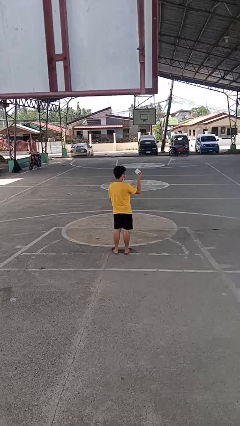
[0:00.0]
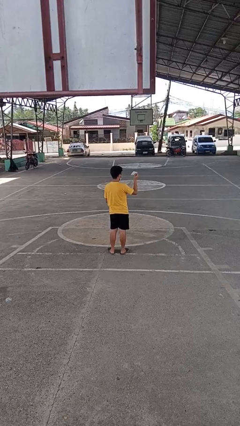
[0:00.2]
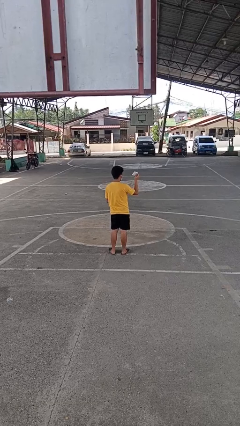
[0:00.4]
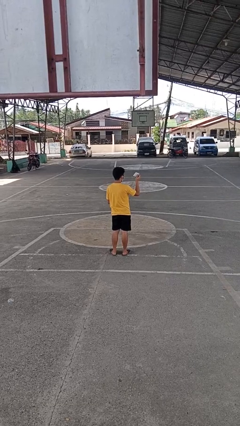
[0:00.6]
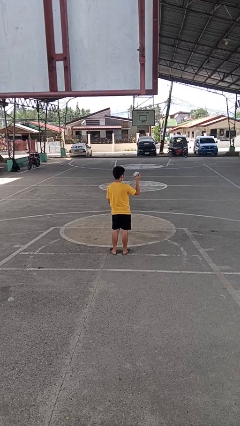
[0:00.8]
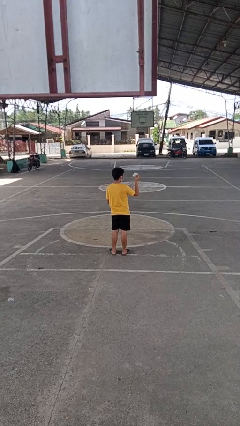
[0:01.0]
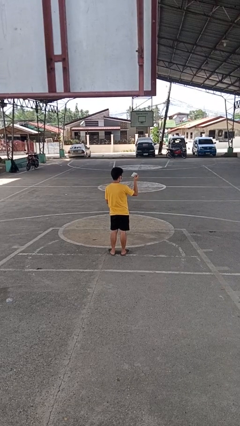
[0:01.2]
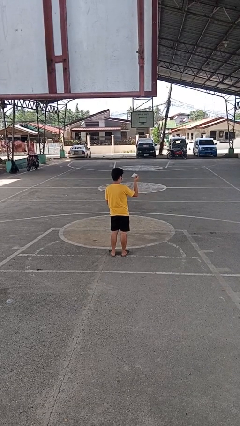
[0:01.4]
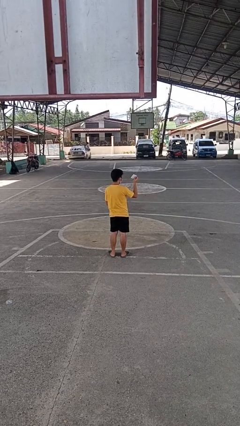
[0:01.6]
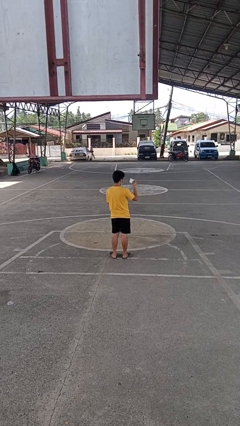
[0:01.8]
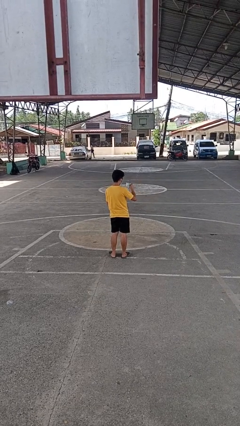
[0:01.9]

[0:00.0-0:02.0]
person takes object from purse

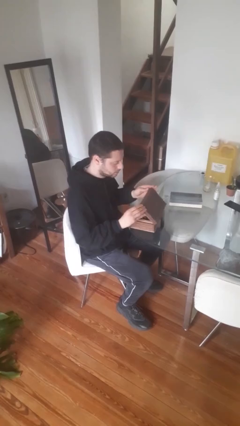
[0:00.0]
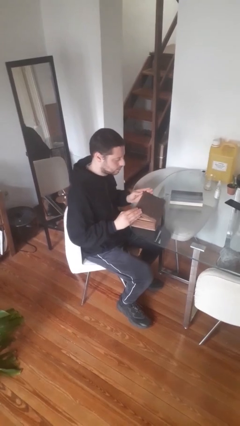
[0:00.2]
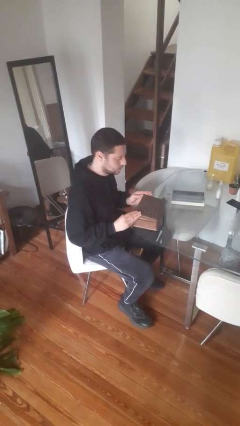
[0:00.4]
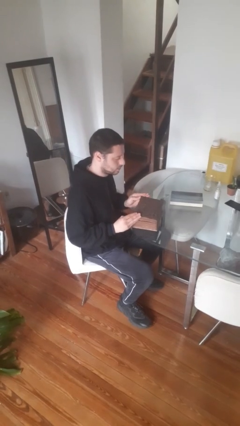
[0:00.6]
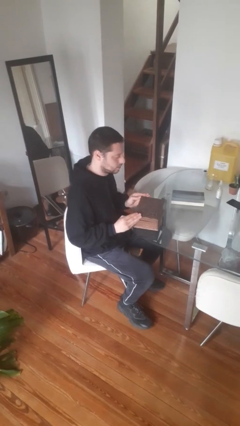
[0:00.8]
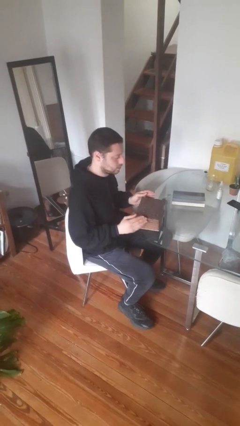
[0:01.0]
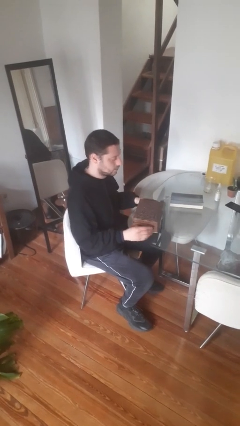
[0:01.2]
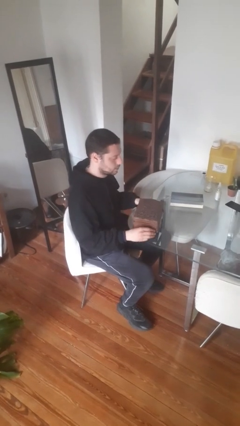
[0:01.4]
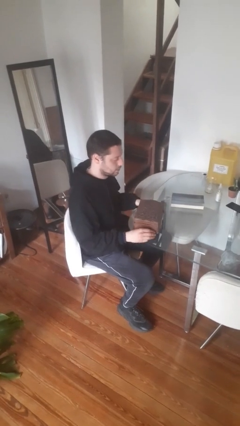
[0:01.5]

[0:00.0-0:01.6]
person closes jewelry box

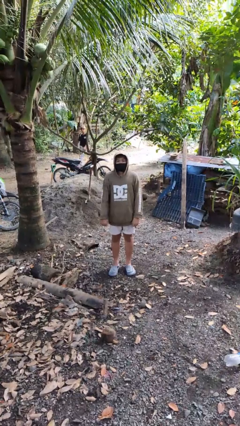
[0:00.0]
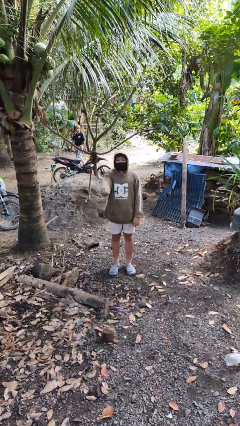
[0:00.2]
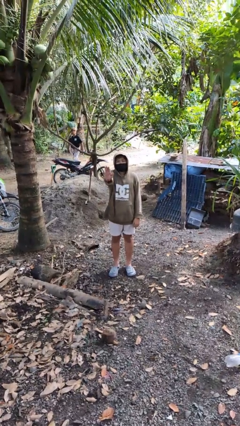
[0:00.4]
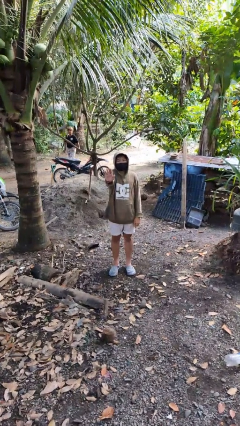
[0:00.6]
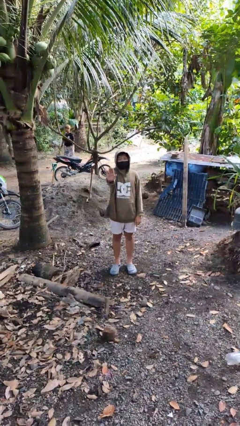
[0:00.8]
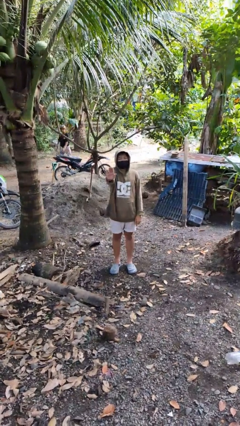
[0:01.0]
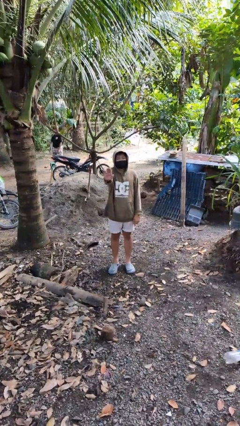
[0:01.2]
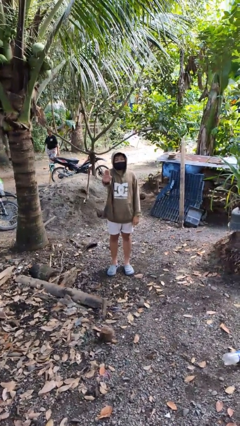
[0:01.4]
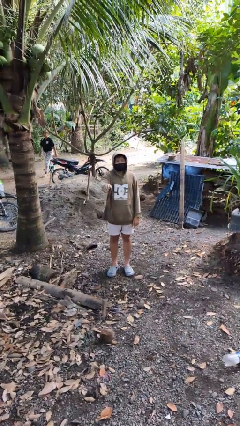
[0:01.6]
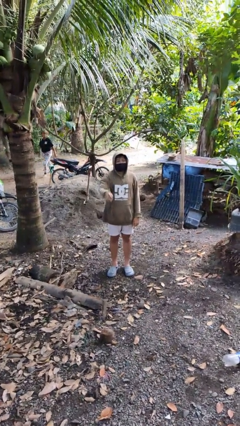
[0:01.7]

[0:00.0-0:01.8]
person gestures stop

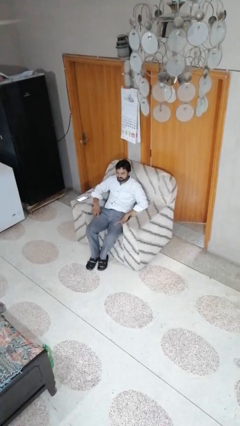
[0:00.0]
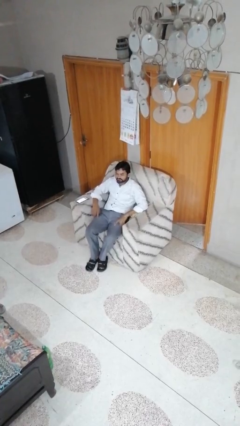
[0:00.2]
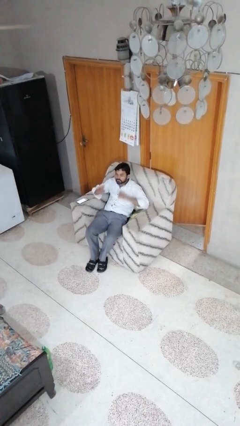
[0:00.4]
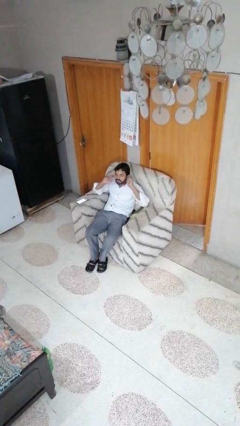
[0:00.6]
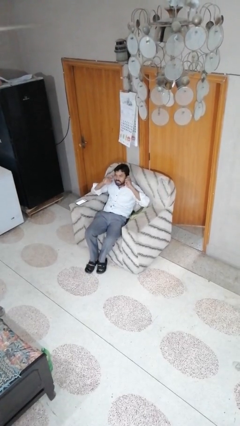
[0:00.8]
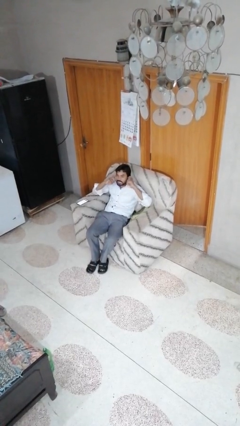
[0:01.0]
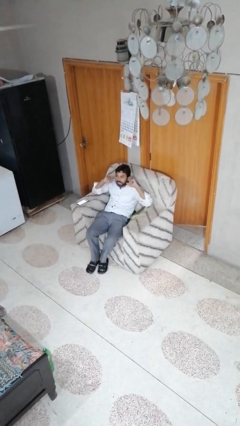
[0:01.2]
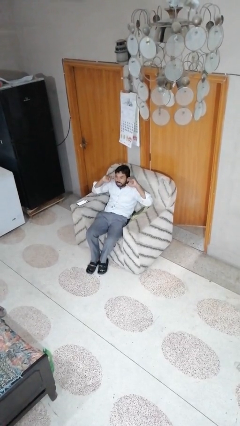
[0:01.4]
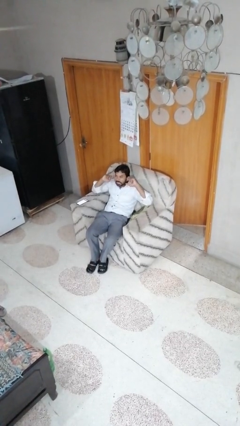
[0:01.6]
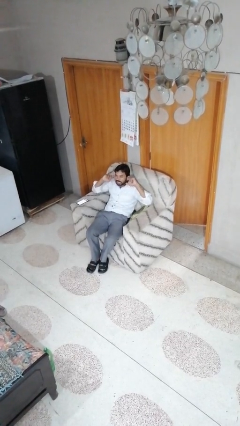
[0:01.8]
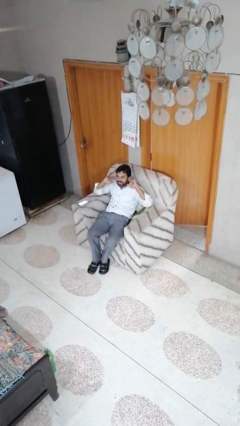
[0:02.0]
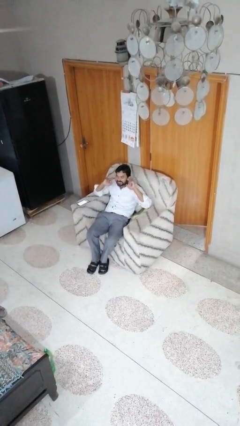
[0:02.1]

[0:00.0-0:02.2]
person puts fingers in ear

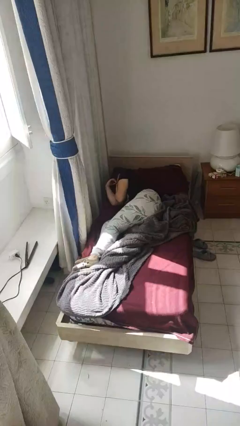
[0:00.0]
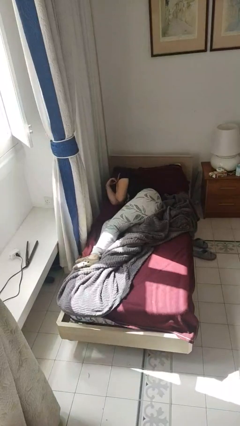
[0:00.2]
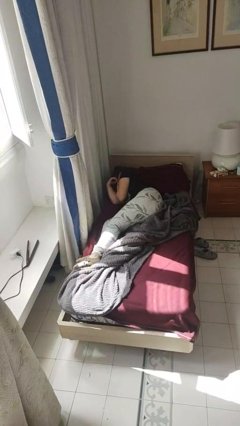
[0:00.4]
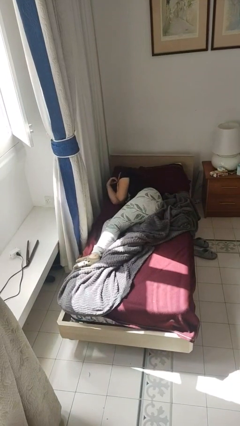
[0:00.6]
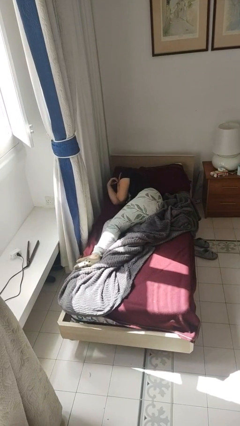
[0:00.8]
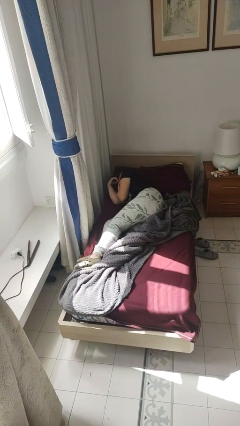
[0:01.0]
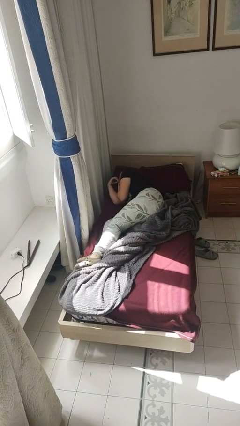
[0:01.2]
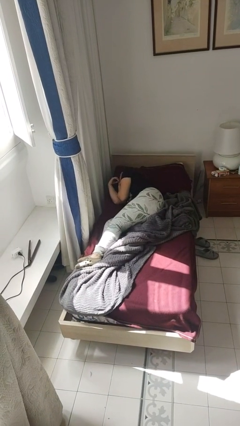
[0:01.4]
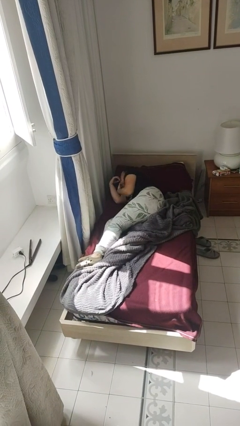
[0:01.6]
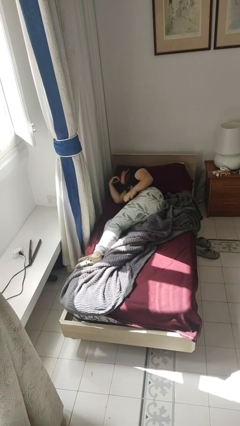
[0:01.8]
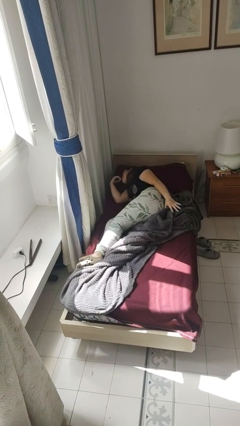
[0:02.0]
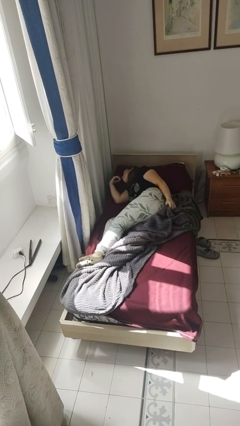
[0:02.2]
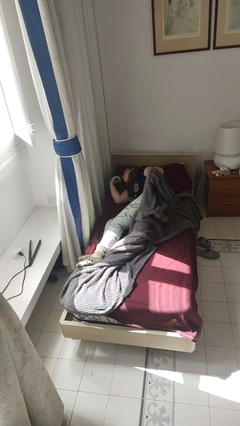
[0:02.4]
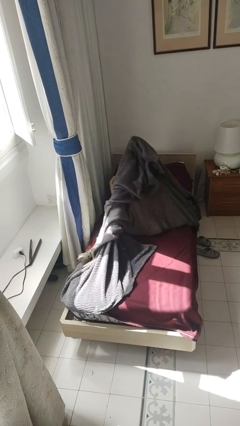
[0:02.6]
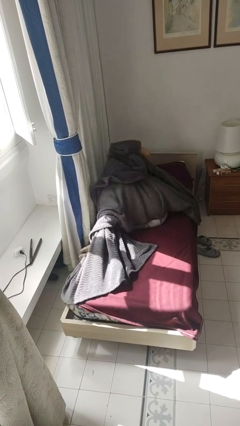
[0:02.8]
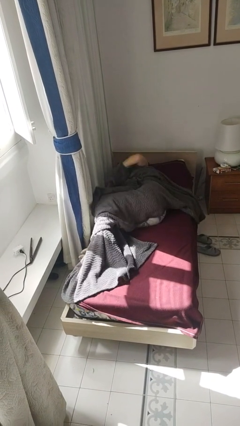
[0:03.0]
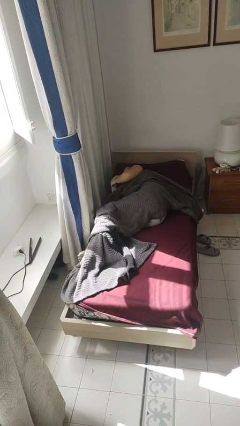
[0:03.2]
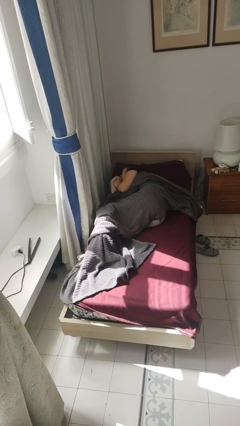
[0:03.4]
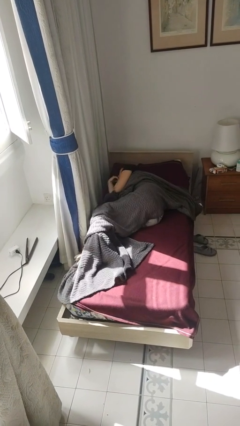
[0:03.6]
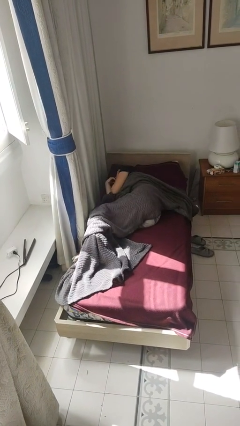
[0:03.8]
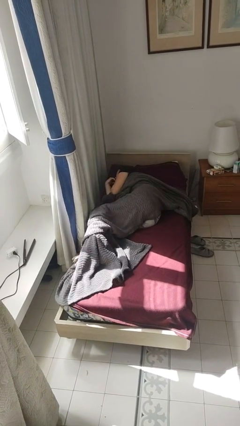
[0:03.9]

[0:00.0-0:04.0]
person covers with bedsheets

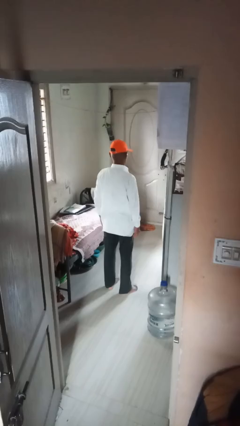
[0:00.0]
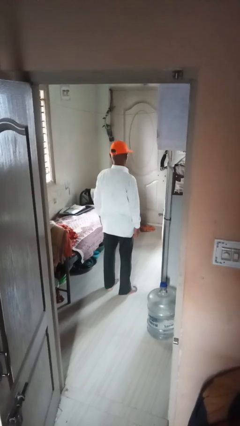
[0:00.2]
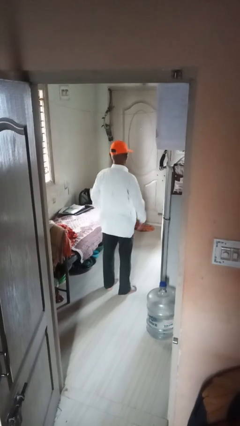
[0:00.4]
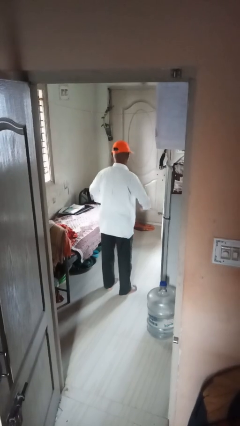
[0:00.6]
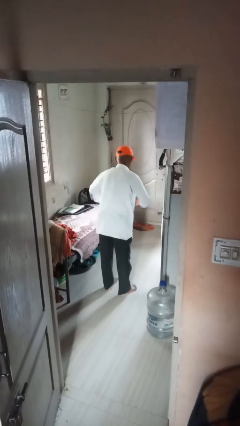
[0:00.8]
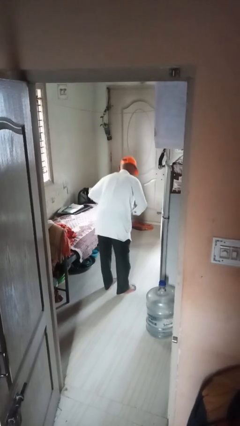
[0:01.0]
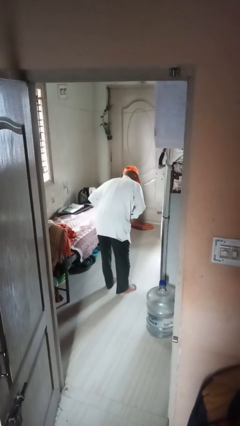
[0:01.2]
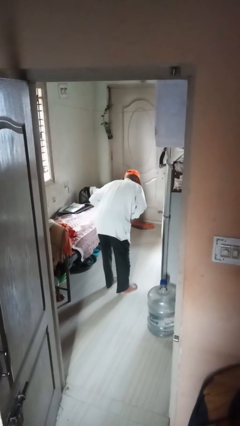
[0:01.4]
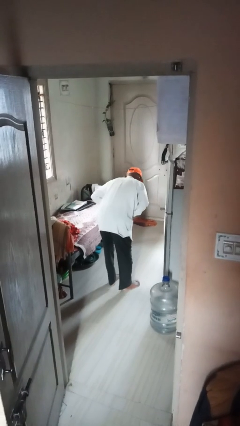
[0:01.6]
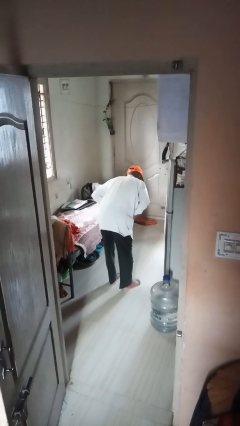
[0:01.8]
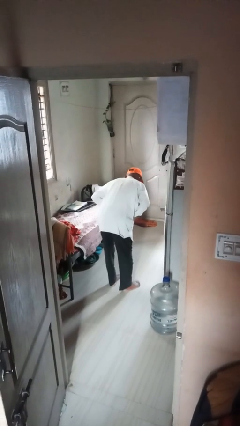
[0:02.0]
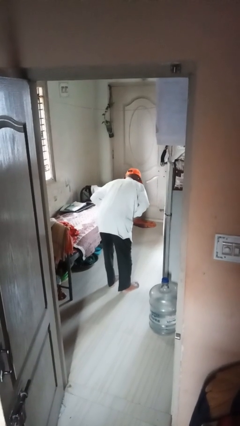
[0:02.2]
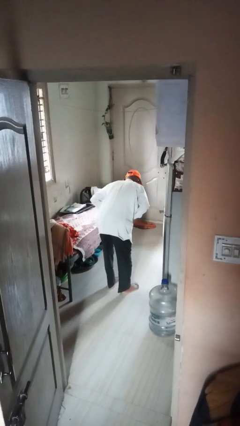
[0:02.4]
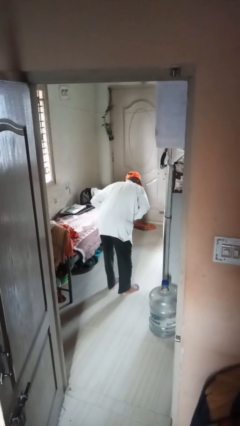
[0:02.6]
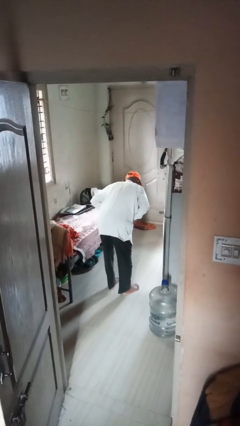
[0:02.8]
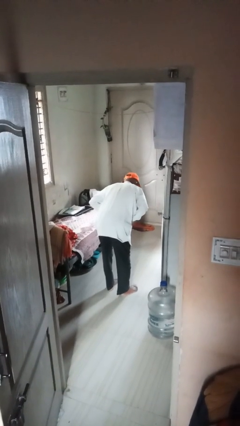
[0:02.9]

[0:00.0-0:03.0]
person bows

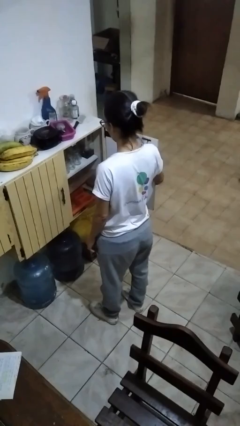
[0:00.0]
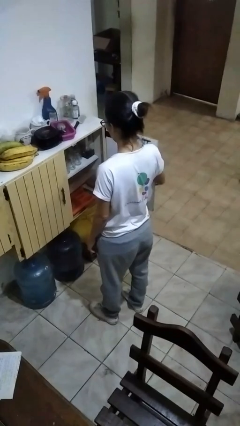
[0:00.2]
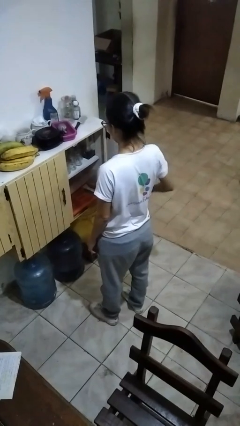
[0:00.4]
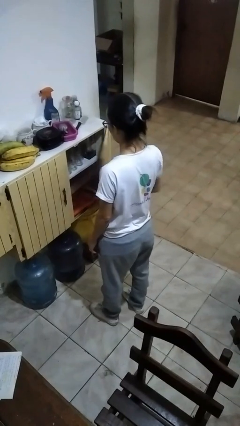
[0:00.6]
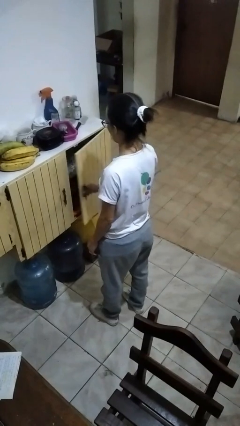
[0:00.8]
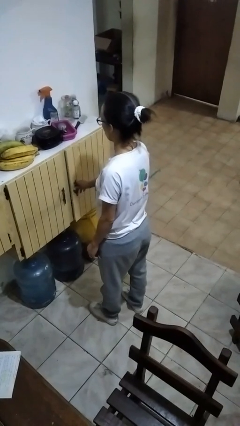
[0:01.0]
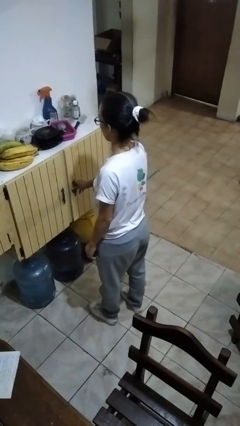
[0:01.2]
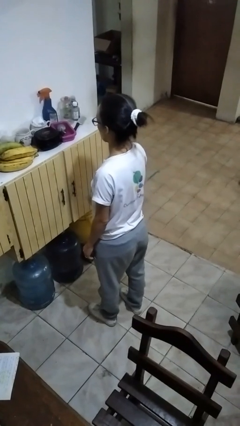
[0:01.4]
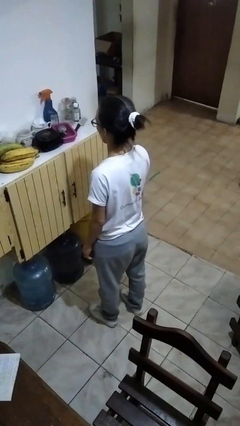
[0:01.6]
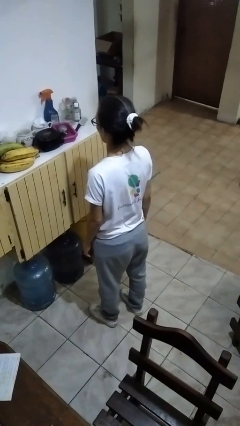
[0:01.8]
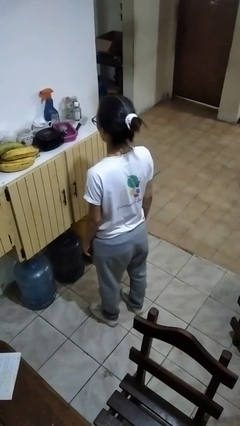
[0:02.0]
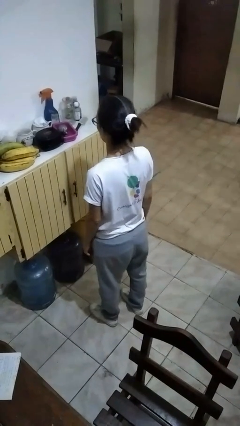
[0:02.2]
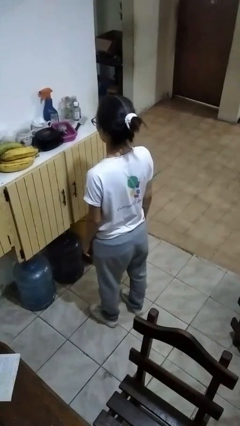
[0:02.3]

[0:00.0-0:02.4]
person closes kitchen drawer
